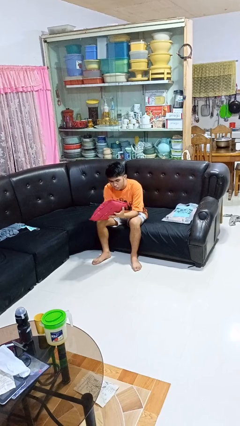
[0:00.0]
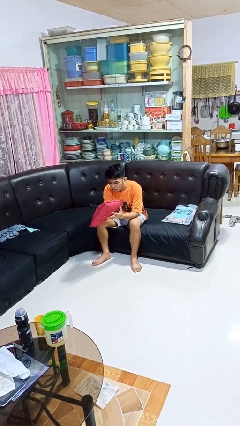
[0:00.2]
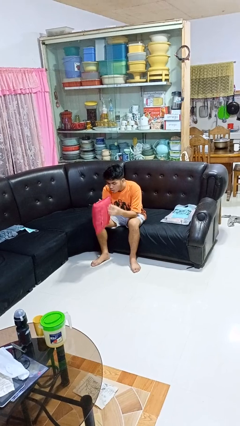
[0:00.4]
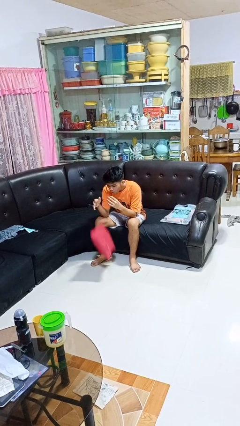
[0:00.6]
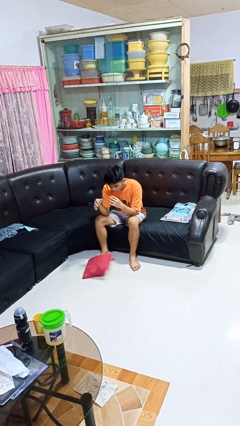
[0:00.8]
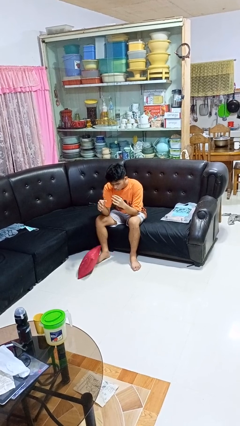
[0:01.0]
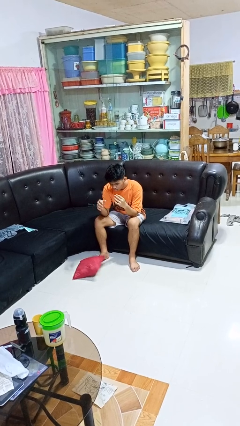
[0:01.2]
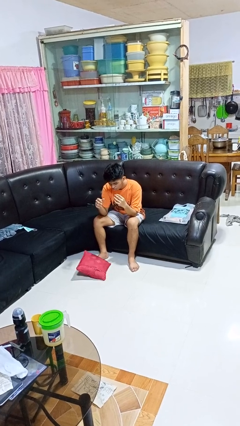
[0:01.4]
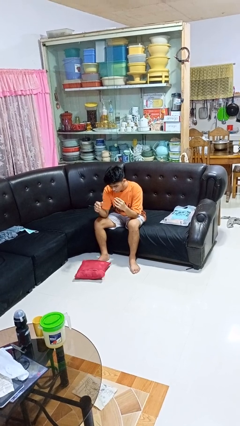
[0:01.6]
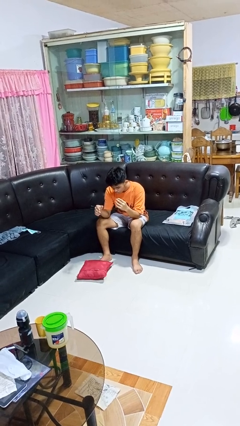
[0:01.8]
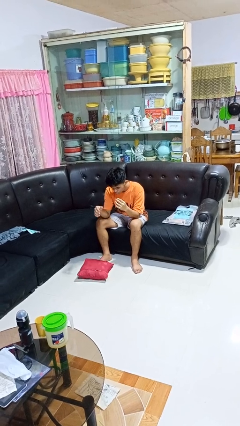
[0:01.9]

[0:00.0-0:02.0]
person drops object

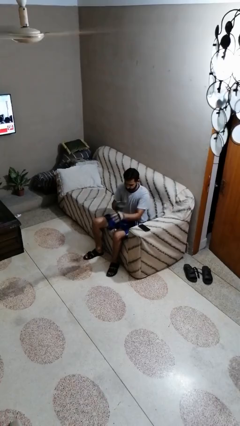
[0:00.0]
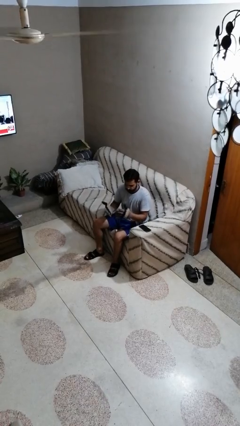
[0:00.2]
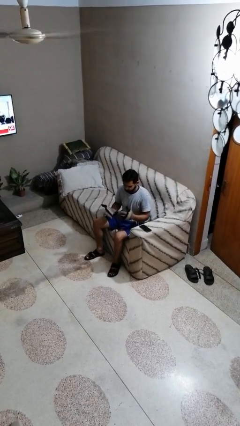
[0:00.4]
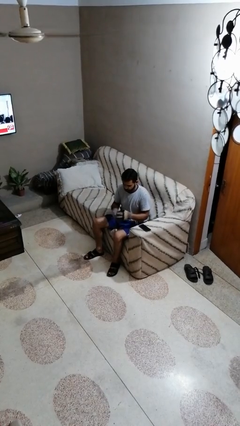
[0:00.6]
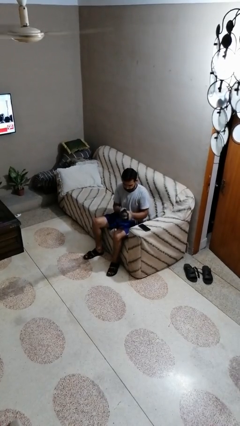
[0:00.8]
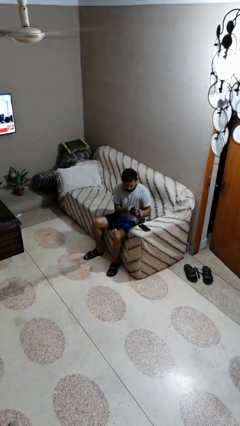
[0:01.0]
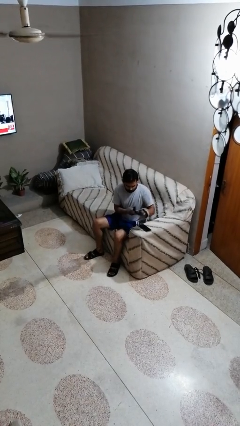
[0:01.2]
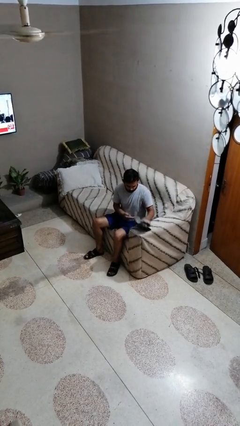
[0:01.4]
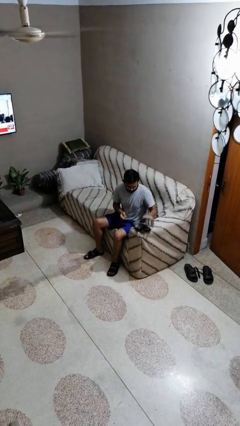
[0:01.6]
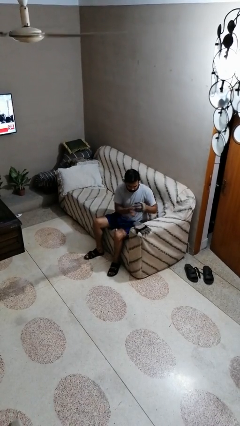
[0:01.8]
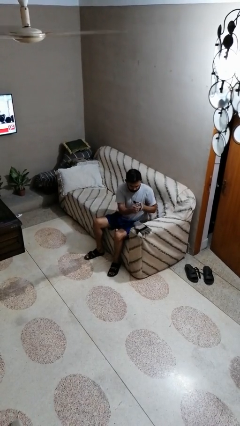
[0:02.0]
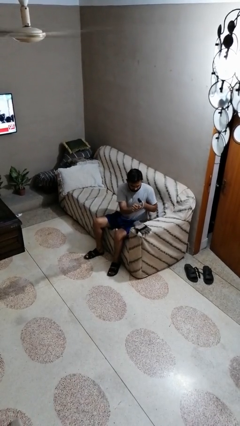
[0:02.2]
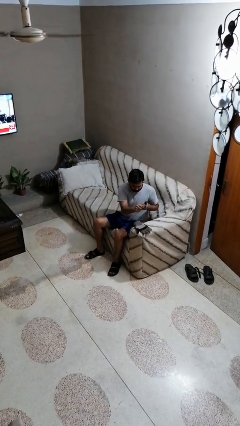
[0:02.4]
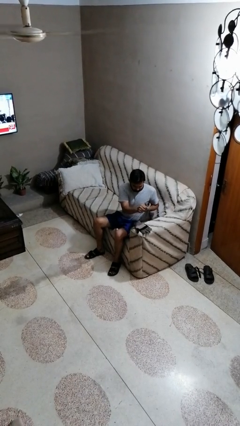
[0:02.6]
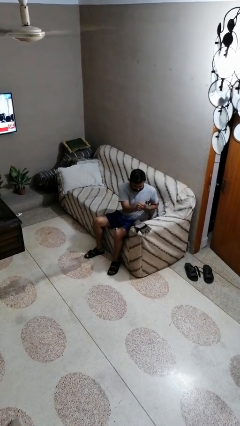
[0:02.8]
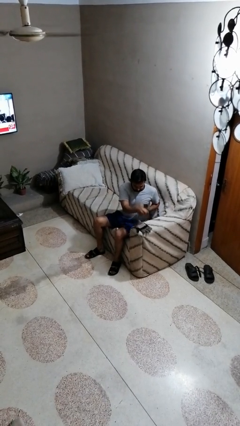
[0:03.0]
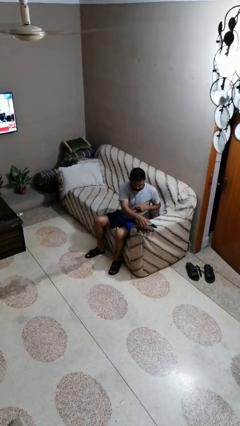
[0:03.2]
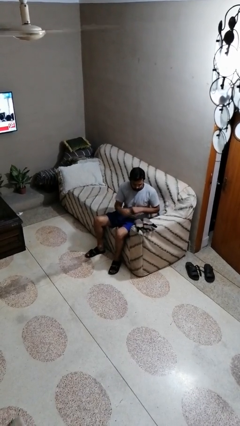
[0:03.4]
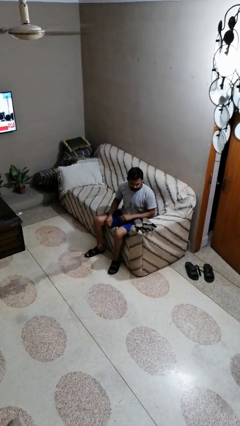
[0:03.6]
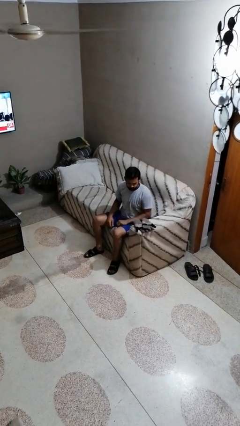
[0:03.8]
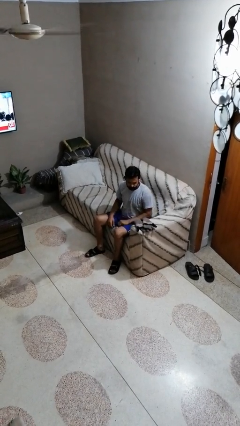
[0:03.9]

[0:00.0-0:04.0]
person takes off gloves

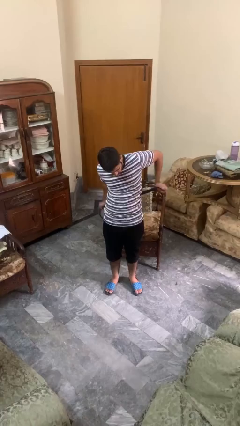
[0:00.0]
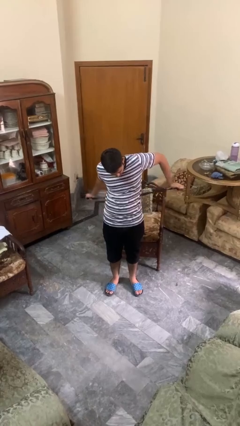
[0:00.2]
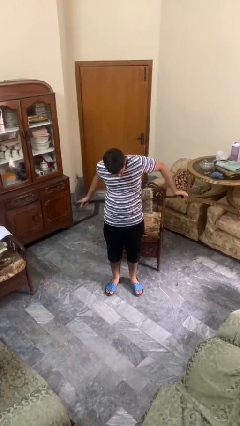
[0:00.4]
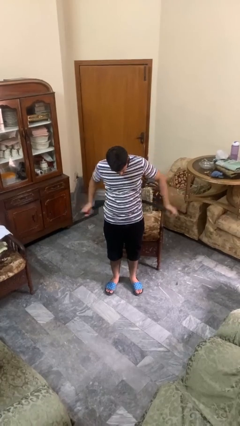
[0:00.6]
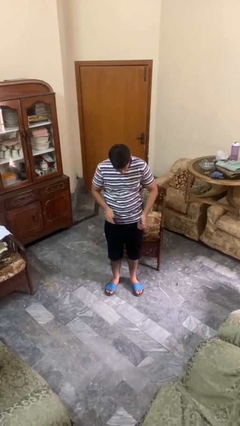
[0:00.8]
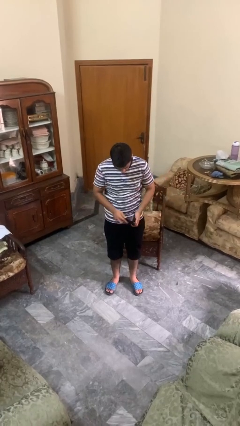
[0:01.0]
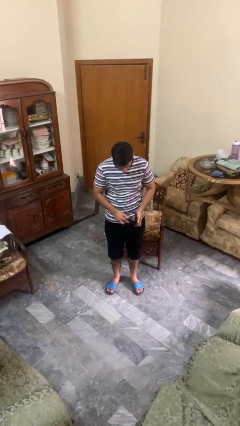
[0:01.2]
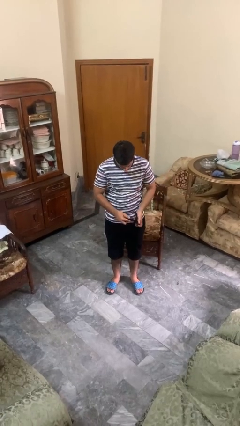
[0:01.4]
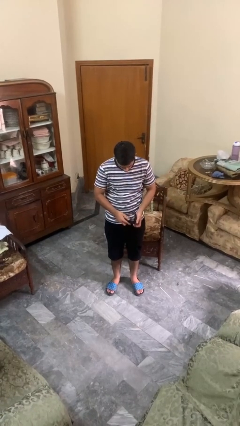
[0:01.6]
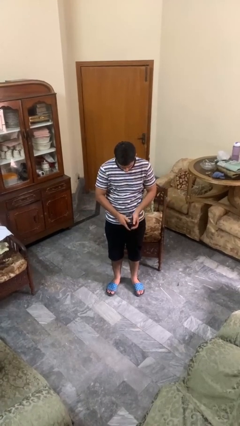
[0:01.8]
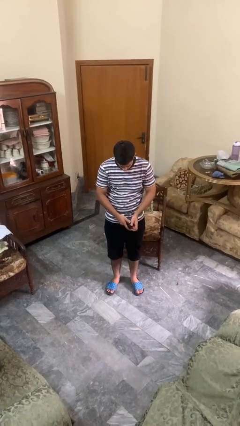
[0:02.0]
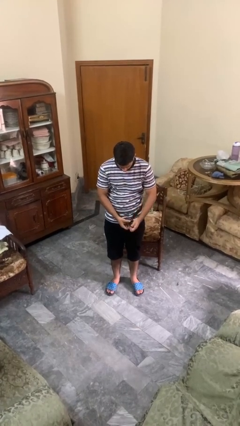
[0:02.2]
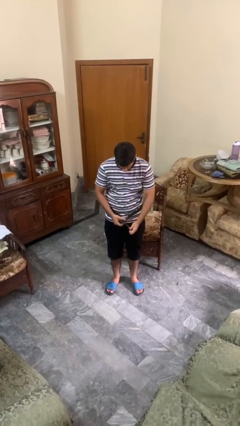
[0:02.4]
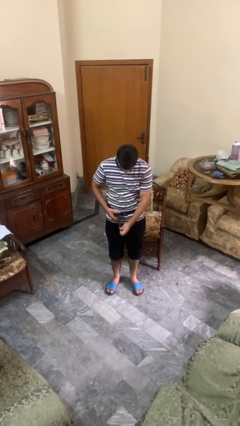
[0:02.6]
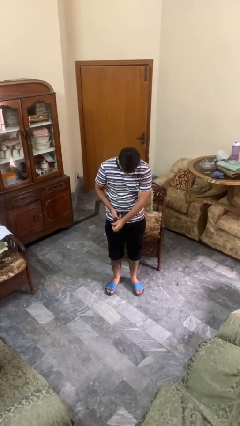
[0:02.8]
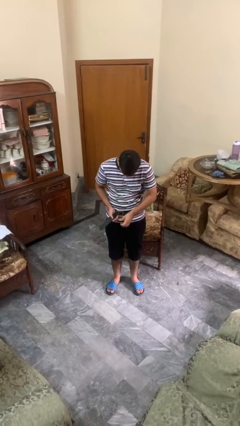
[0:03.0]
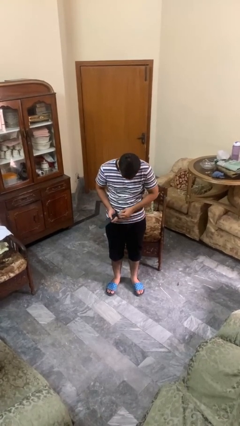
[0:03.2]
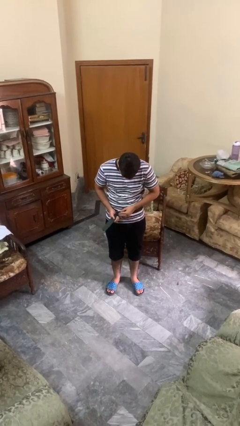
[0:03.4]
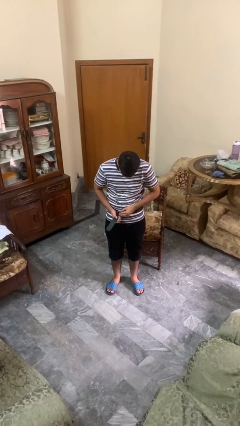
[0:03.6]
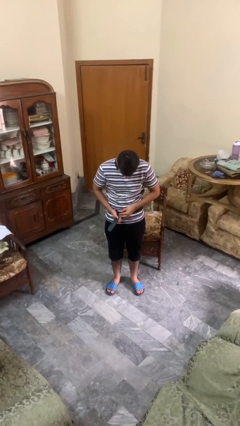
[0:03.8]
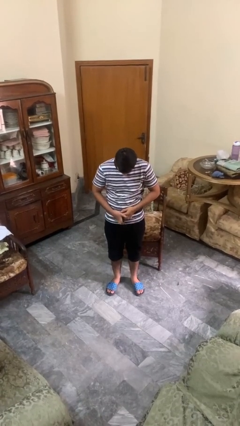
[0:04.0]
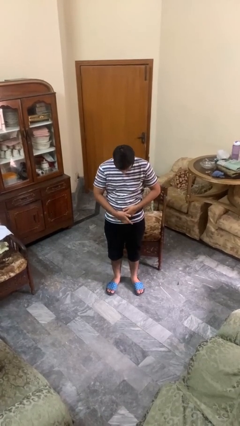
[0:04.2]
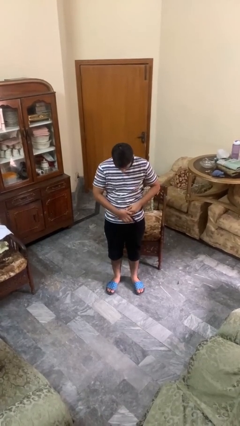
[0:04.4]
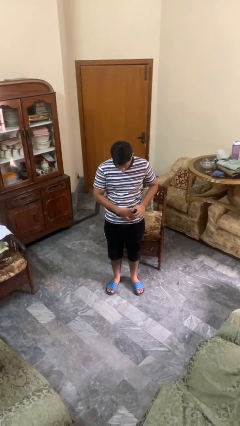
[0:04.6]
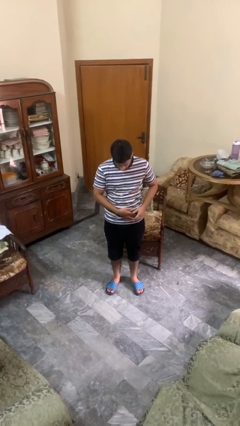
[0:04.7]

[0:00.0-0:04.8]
person puts on belt

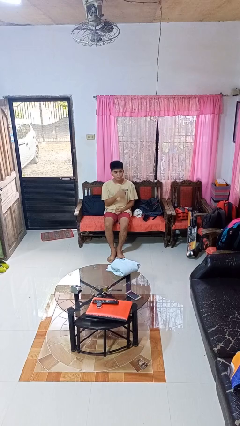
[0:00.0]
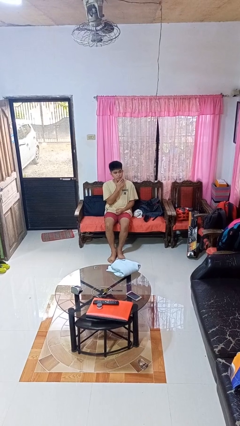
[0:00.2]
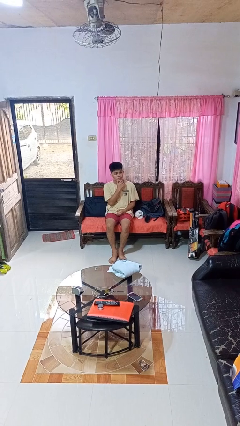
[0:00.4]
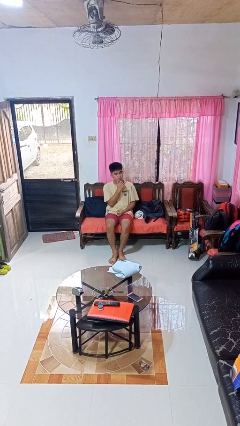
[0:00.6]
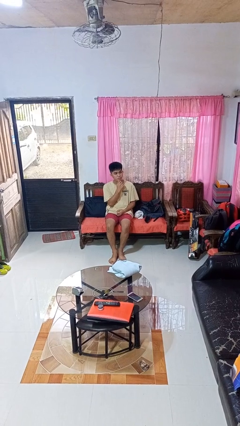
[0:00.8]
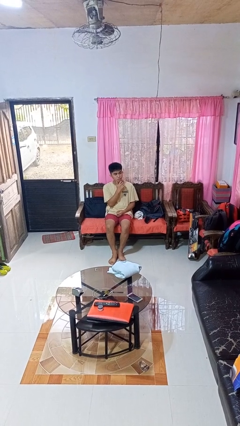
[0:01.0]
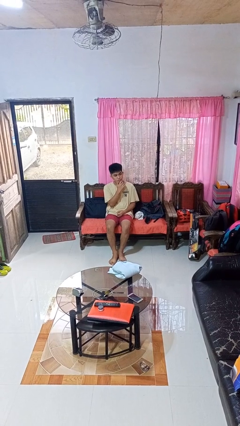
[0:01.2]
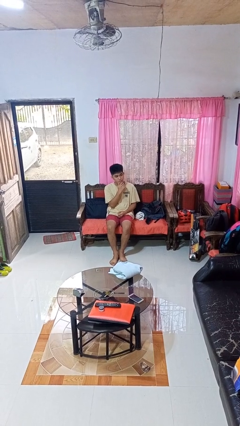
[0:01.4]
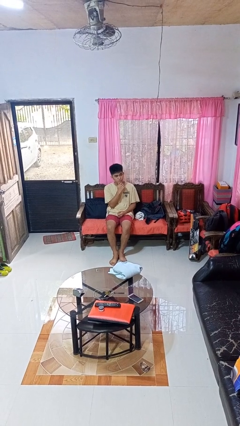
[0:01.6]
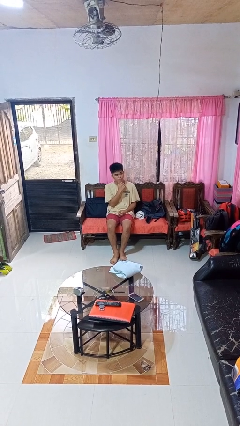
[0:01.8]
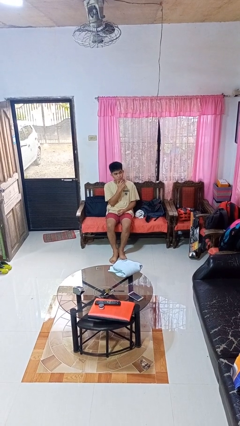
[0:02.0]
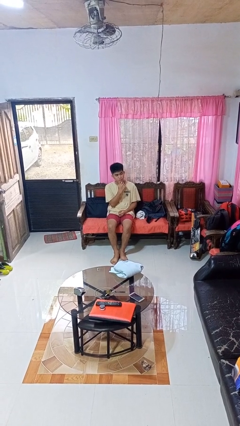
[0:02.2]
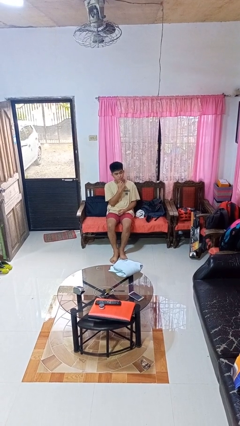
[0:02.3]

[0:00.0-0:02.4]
person strokes chin

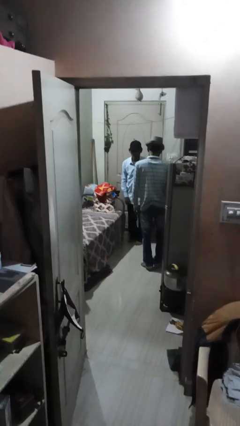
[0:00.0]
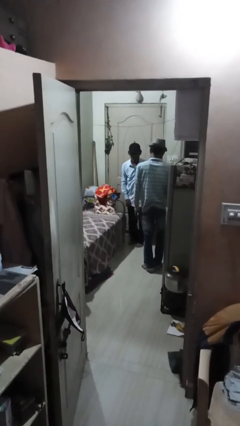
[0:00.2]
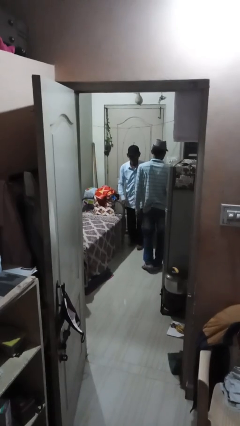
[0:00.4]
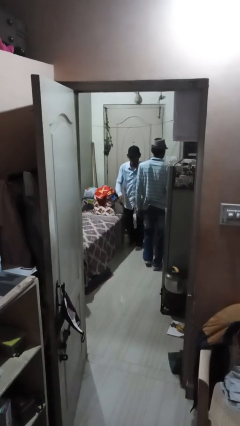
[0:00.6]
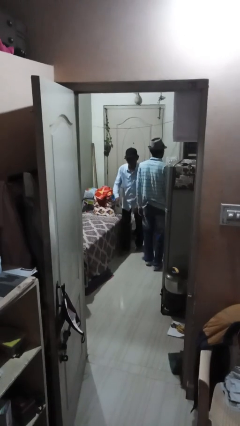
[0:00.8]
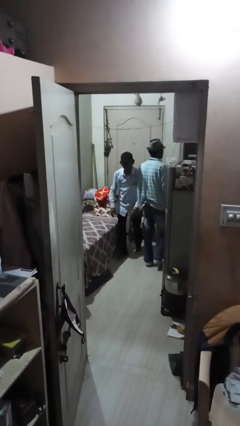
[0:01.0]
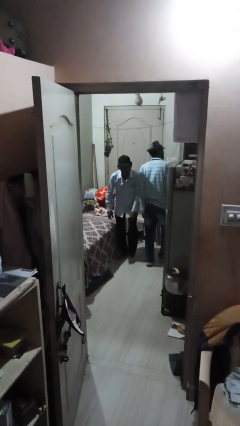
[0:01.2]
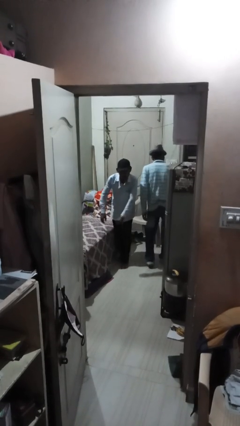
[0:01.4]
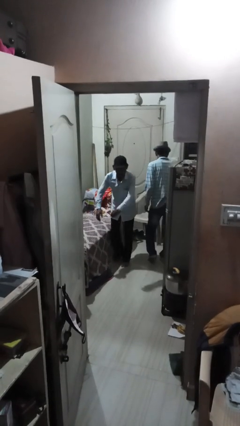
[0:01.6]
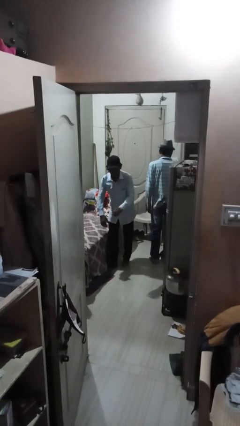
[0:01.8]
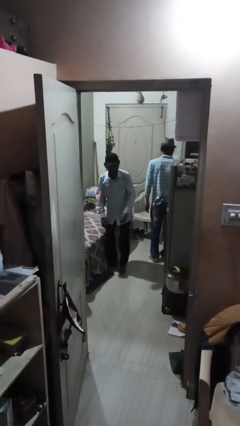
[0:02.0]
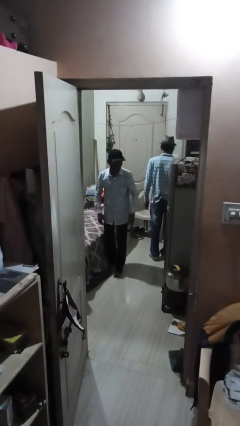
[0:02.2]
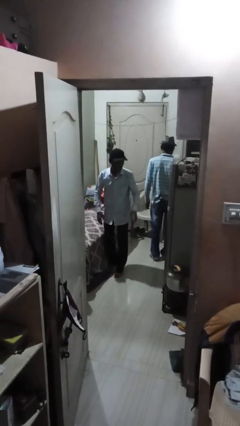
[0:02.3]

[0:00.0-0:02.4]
person bumps into person

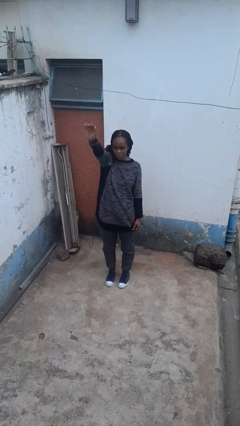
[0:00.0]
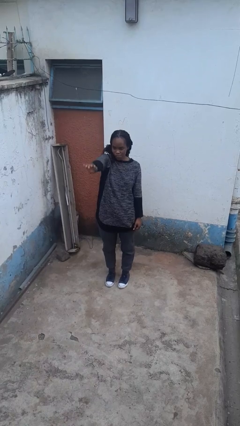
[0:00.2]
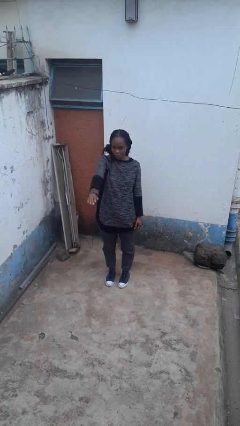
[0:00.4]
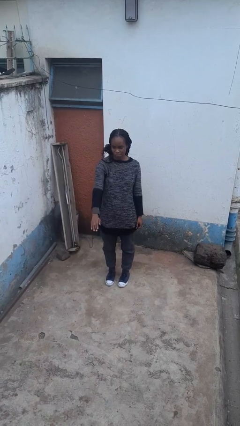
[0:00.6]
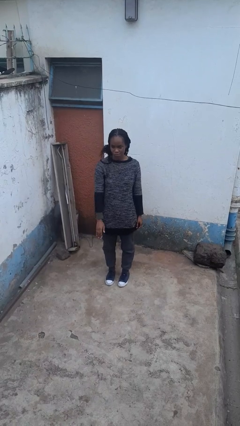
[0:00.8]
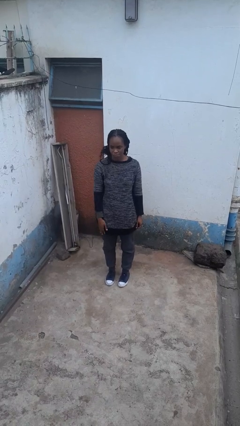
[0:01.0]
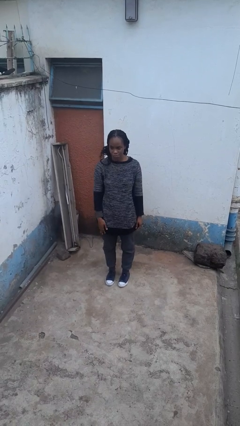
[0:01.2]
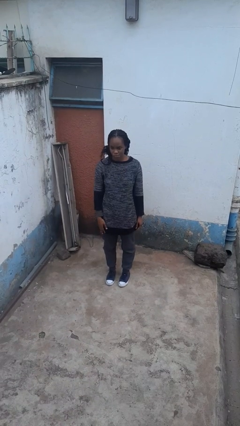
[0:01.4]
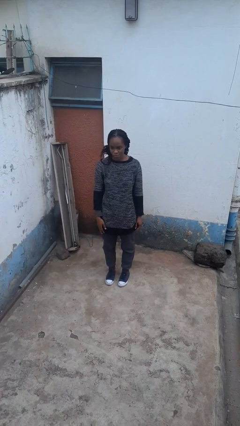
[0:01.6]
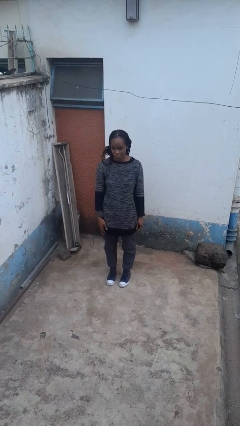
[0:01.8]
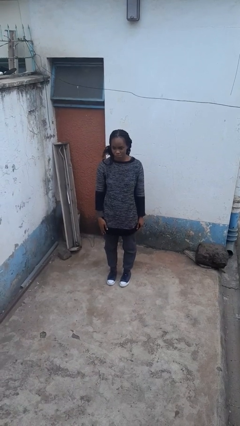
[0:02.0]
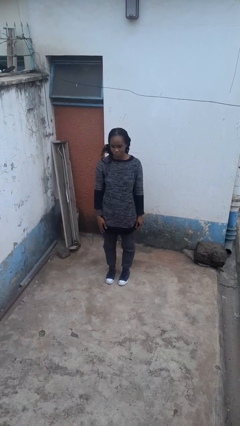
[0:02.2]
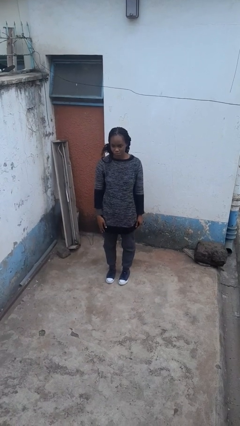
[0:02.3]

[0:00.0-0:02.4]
person gestures lower hand
